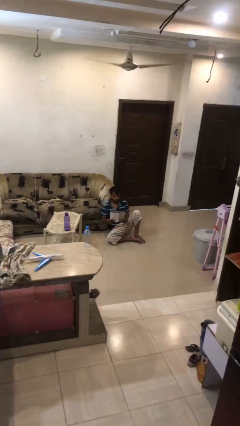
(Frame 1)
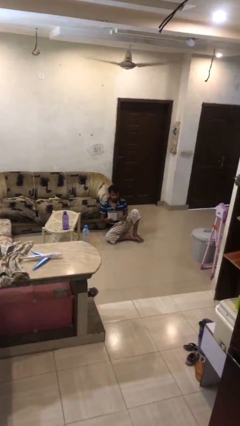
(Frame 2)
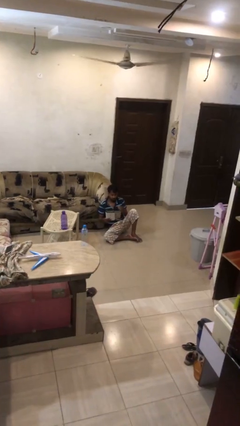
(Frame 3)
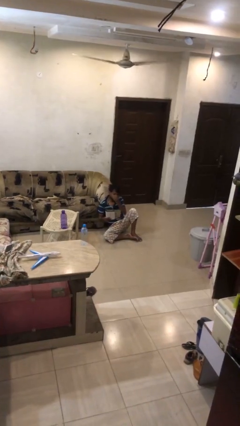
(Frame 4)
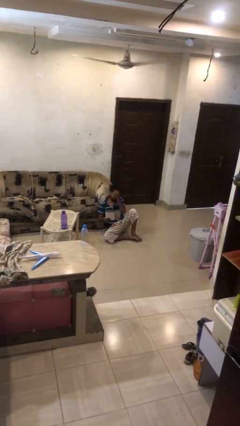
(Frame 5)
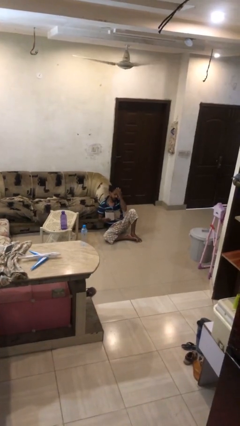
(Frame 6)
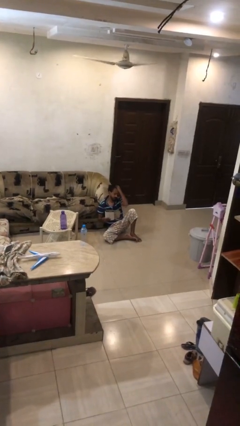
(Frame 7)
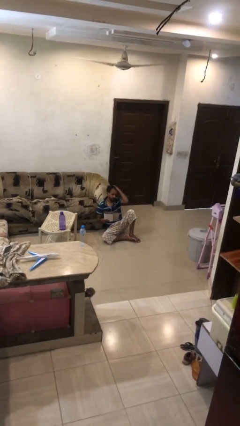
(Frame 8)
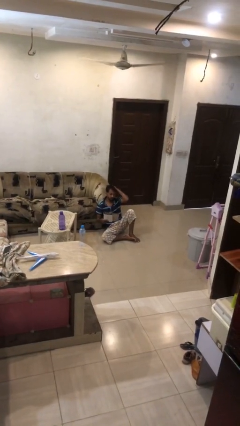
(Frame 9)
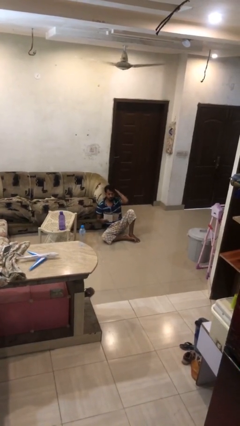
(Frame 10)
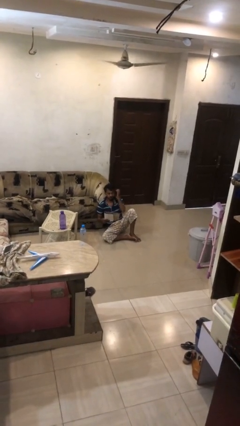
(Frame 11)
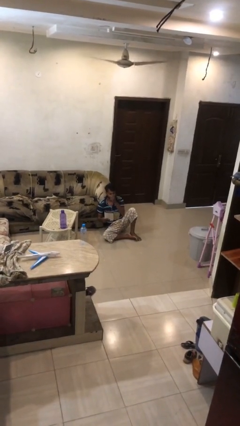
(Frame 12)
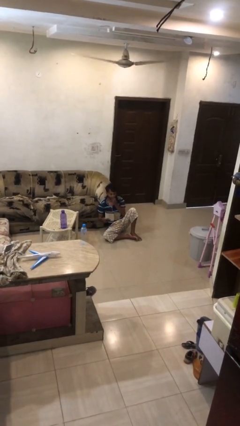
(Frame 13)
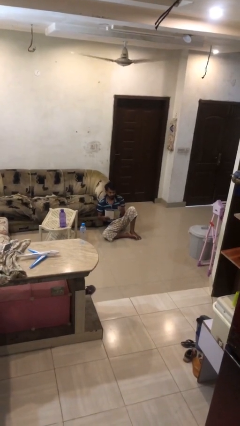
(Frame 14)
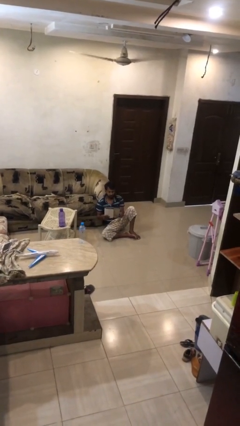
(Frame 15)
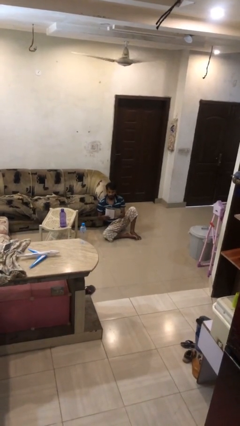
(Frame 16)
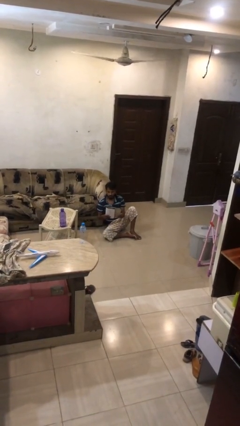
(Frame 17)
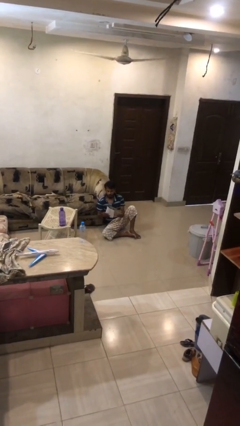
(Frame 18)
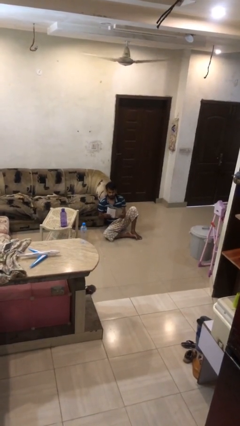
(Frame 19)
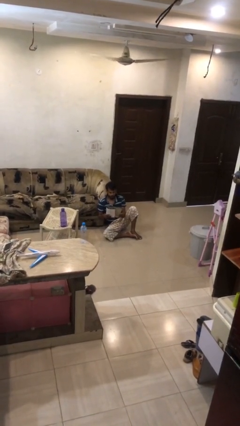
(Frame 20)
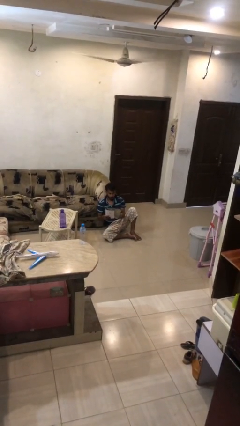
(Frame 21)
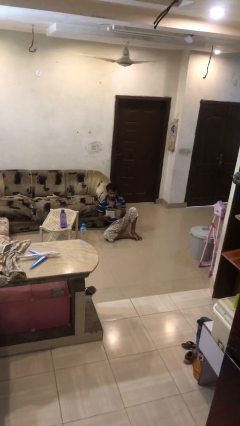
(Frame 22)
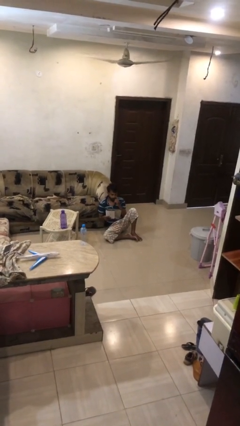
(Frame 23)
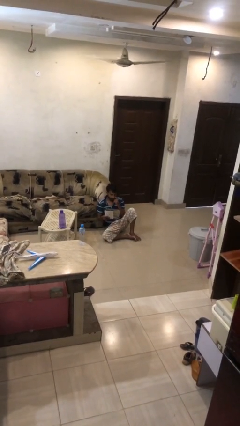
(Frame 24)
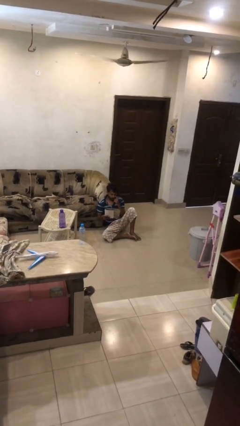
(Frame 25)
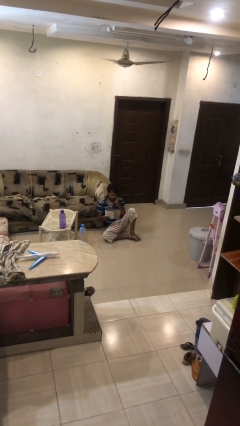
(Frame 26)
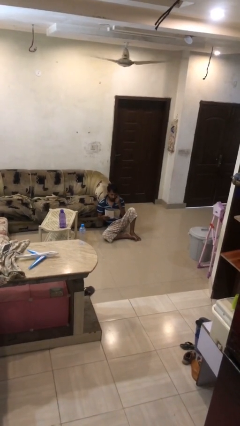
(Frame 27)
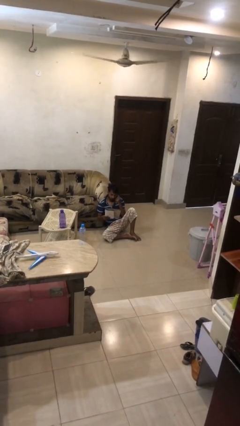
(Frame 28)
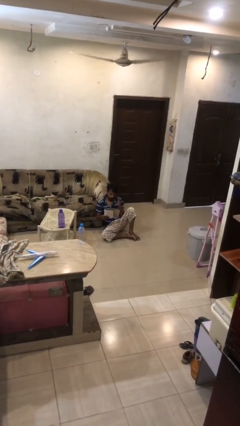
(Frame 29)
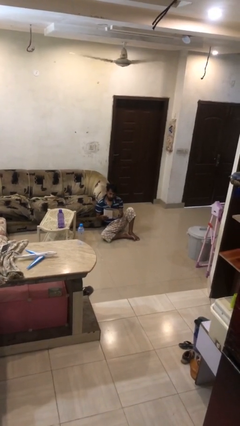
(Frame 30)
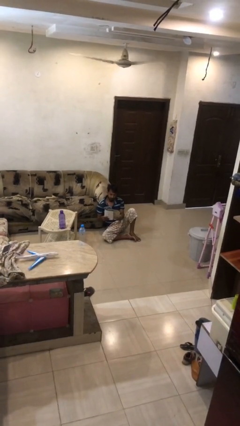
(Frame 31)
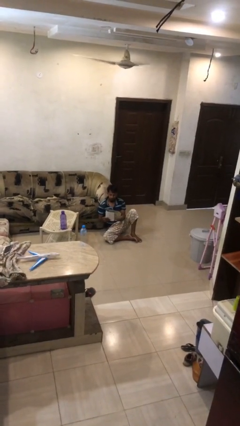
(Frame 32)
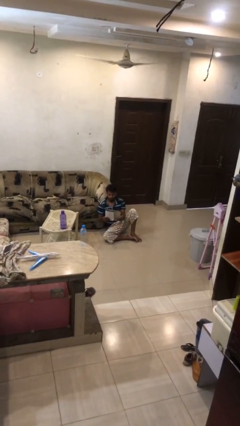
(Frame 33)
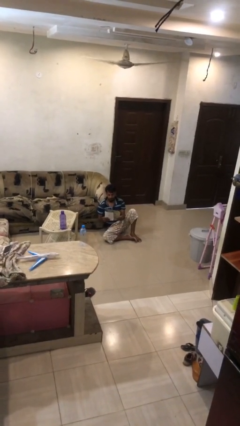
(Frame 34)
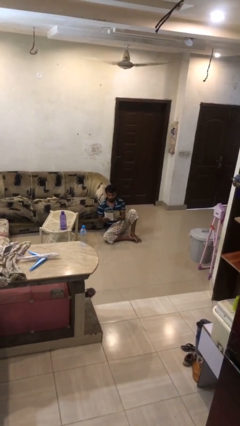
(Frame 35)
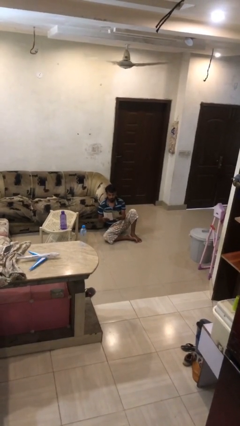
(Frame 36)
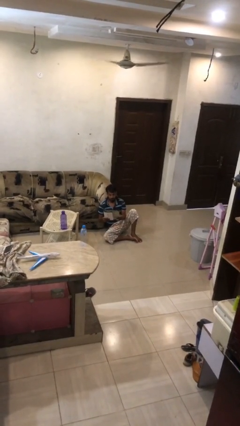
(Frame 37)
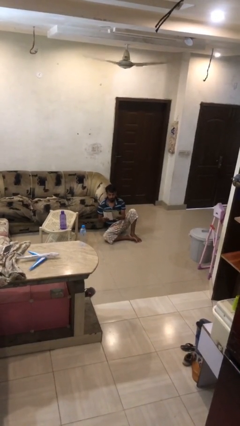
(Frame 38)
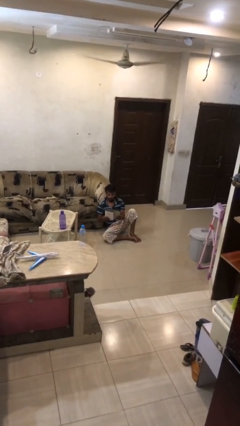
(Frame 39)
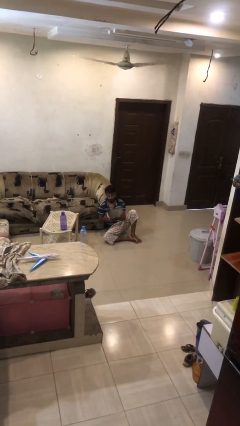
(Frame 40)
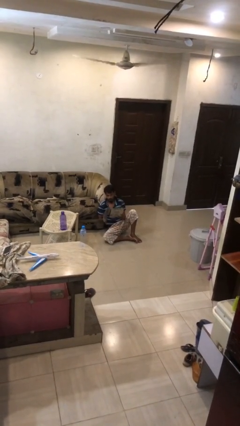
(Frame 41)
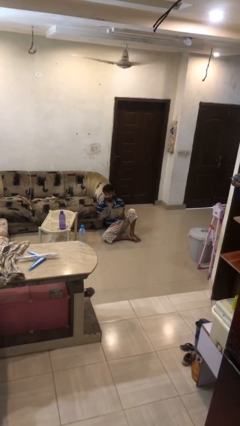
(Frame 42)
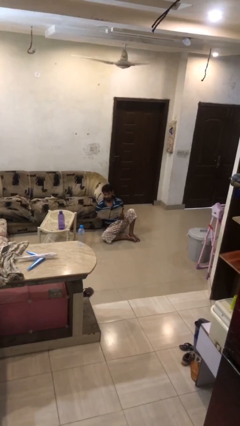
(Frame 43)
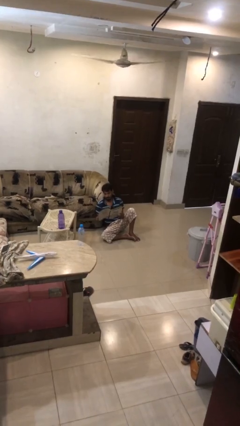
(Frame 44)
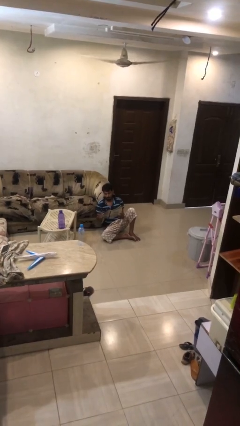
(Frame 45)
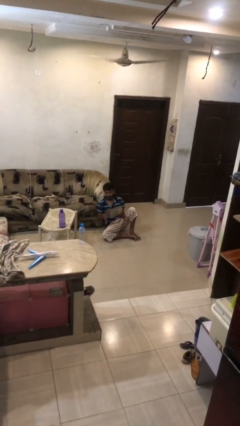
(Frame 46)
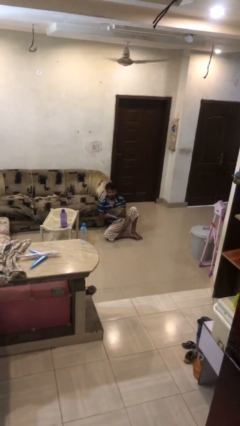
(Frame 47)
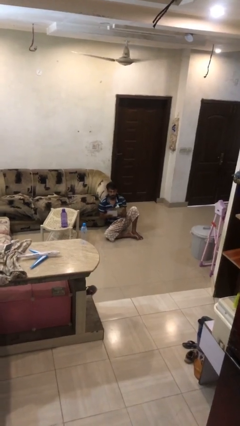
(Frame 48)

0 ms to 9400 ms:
person reads document

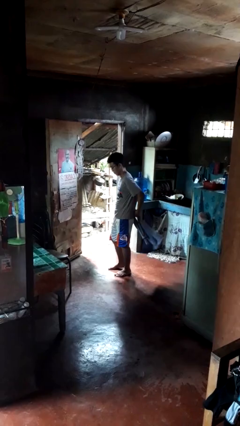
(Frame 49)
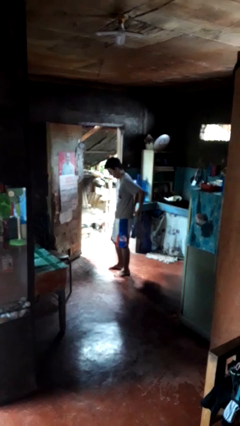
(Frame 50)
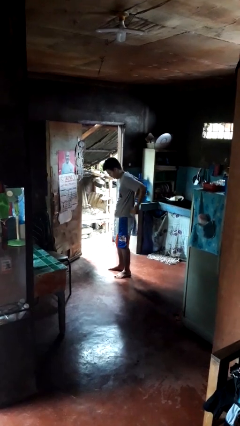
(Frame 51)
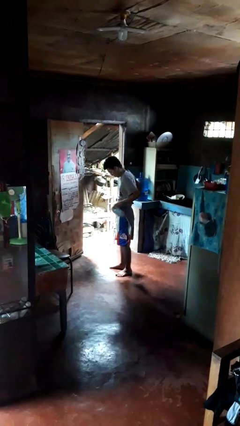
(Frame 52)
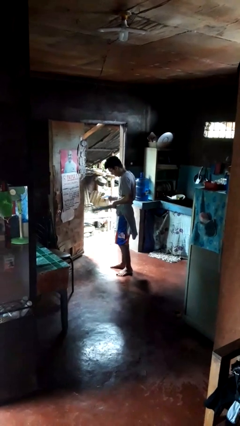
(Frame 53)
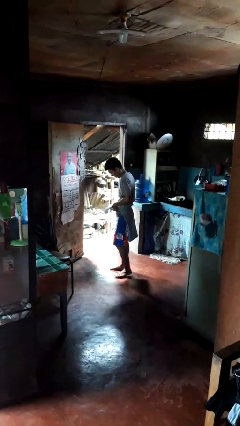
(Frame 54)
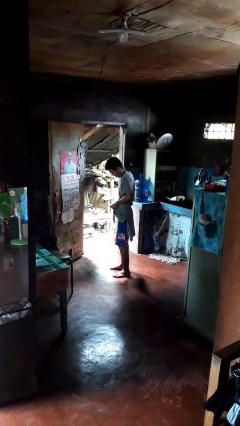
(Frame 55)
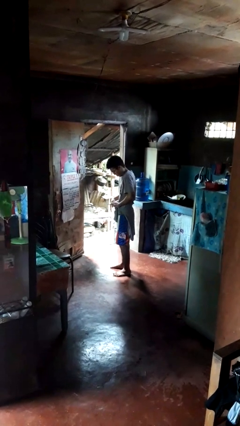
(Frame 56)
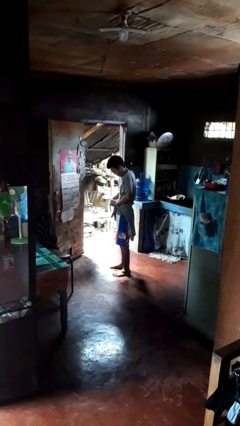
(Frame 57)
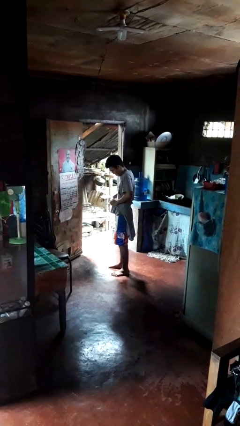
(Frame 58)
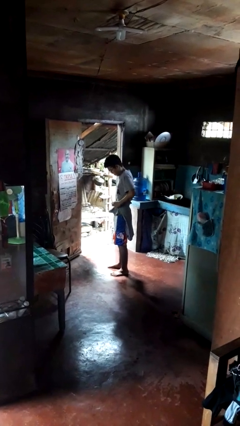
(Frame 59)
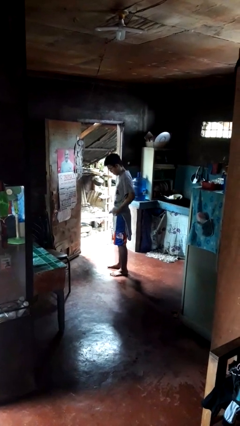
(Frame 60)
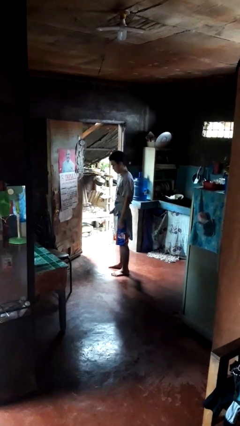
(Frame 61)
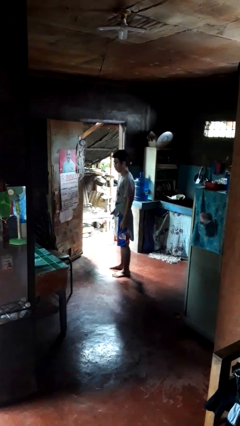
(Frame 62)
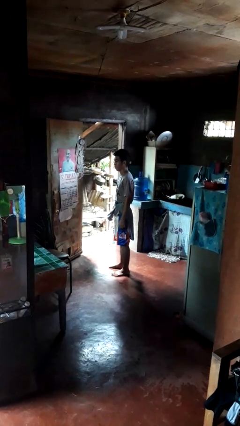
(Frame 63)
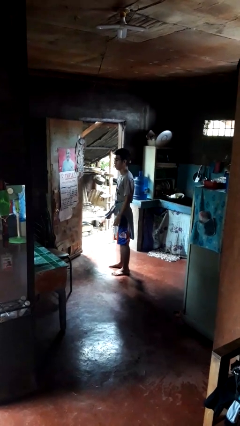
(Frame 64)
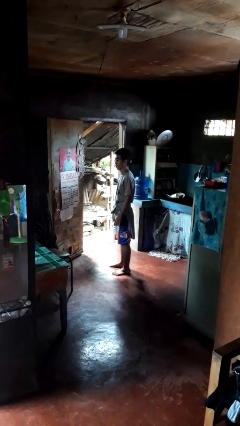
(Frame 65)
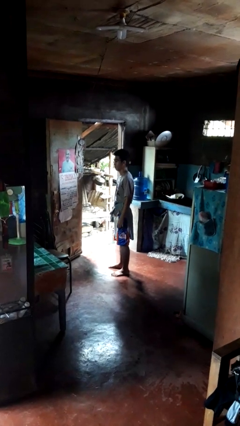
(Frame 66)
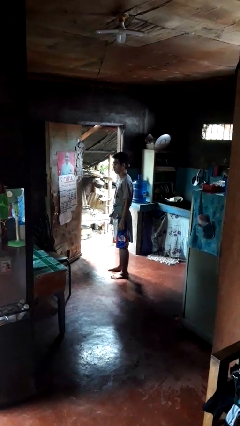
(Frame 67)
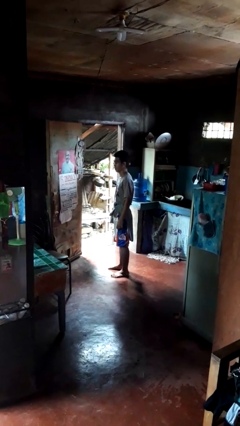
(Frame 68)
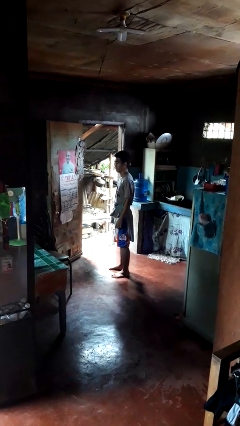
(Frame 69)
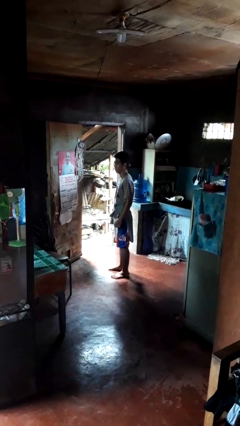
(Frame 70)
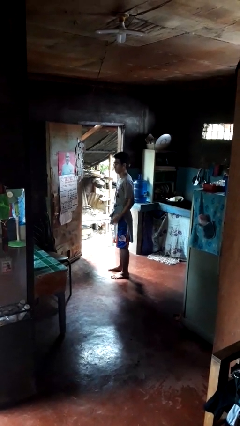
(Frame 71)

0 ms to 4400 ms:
person ties jacket around waist

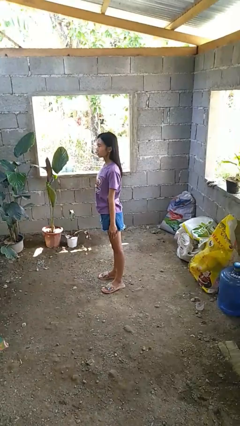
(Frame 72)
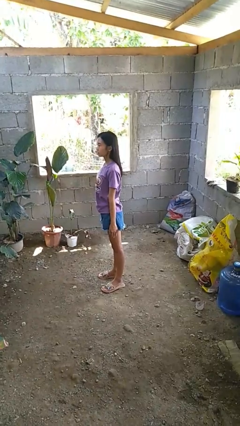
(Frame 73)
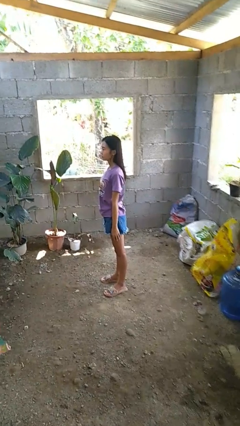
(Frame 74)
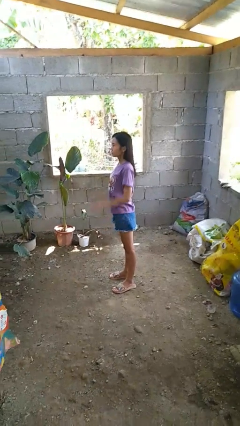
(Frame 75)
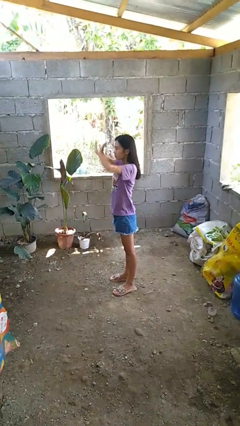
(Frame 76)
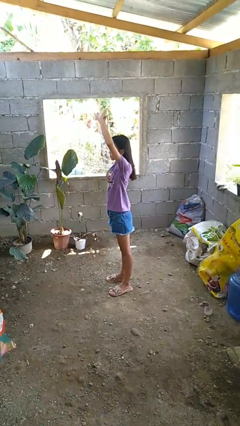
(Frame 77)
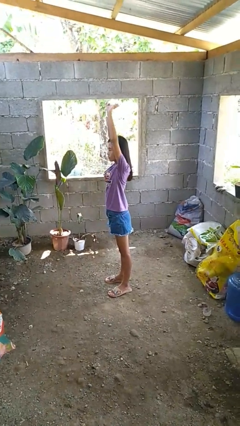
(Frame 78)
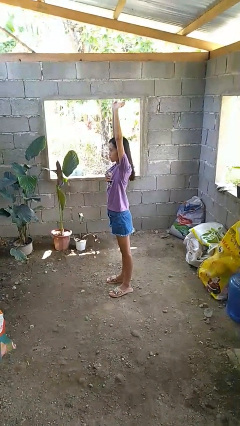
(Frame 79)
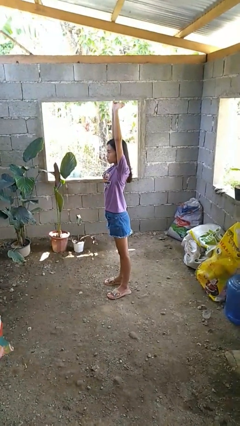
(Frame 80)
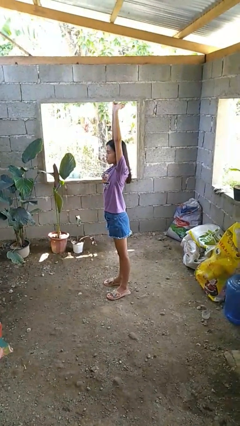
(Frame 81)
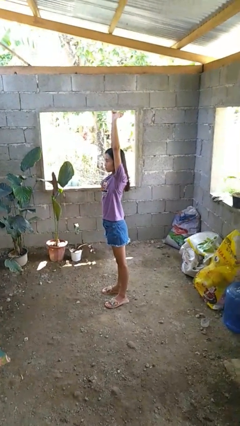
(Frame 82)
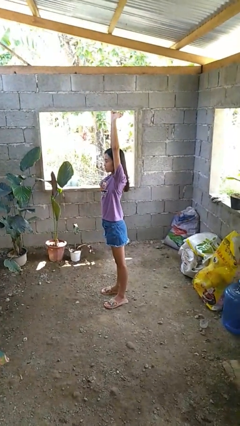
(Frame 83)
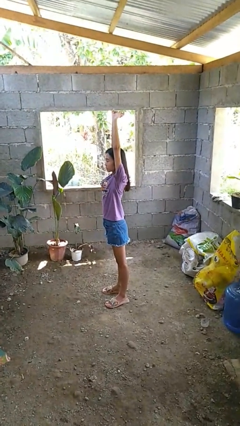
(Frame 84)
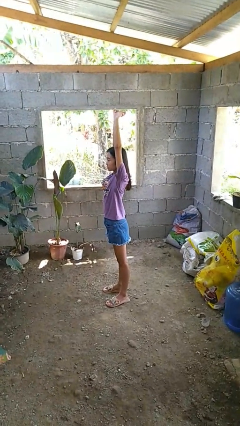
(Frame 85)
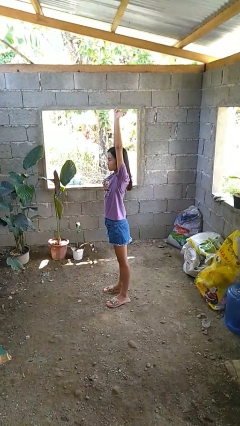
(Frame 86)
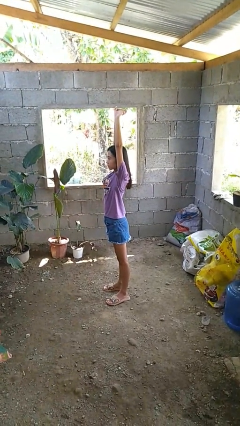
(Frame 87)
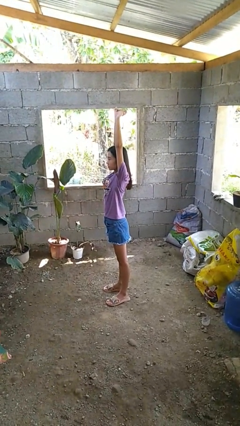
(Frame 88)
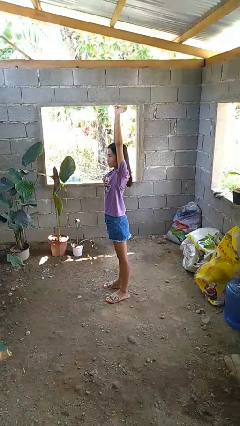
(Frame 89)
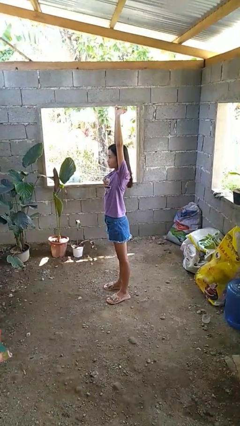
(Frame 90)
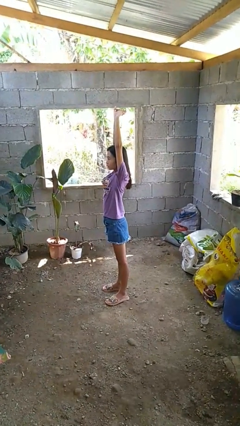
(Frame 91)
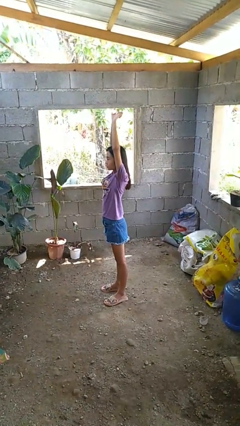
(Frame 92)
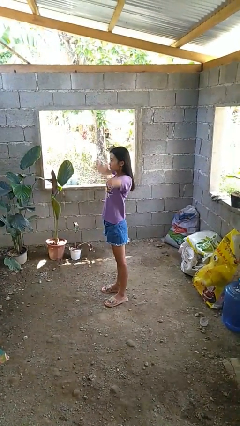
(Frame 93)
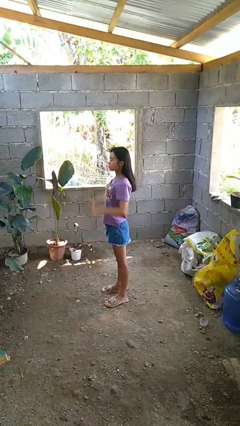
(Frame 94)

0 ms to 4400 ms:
person stretches arms over head
